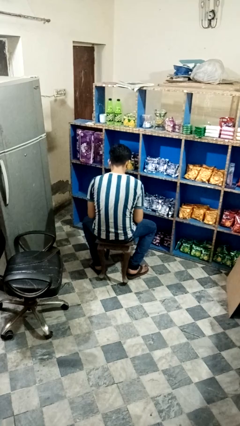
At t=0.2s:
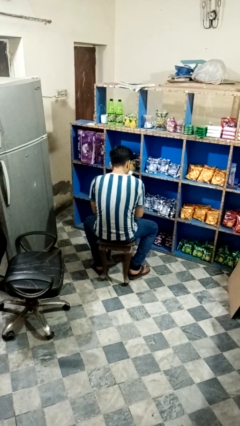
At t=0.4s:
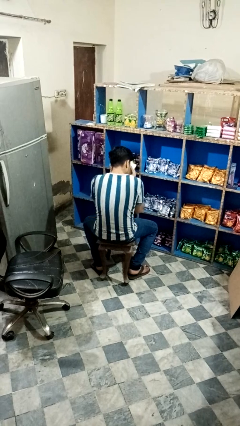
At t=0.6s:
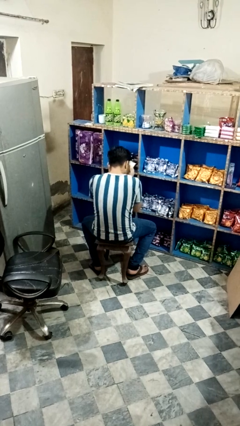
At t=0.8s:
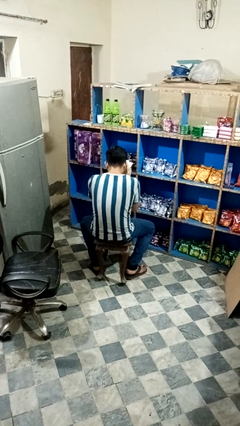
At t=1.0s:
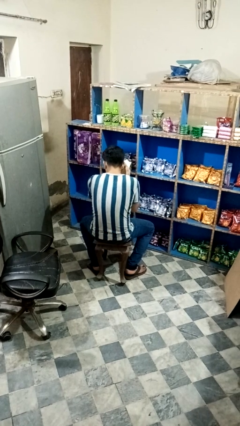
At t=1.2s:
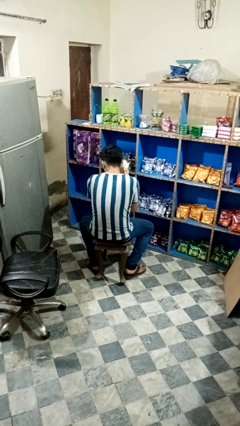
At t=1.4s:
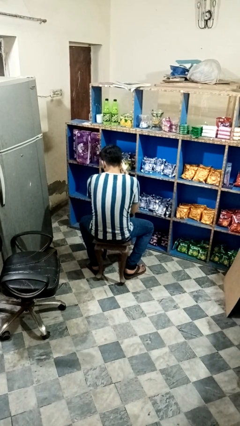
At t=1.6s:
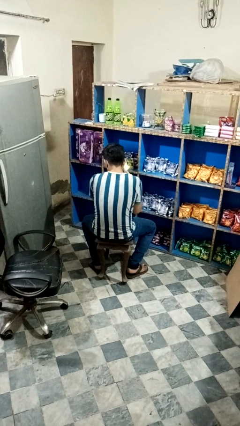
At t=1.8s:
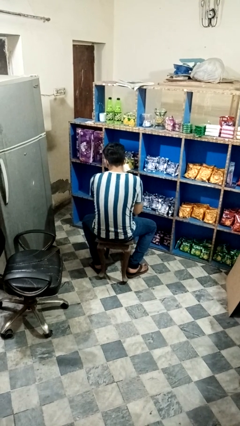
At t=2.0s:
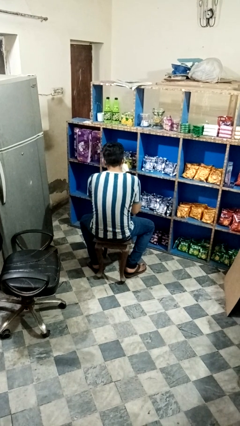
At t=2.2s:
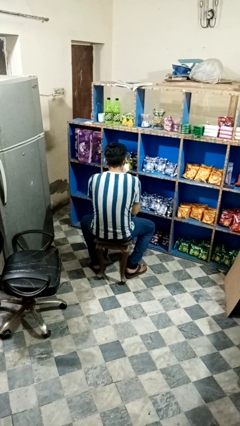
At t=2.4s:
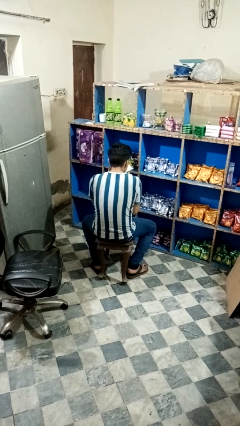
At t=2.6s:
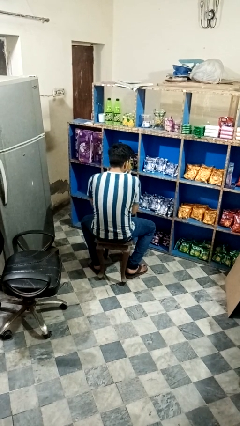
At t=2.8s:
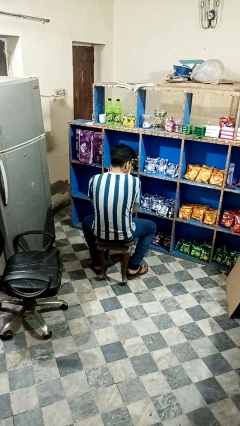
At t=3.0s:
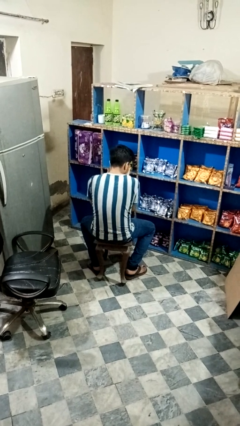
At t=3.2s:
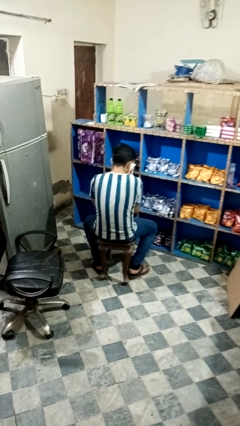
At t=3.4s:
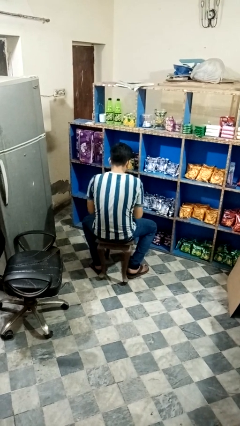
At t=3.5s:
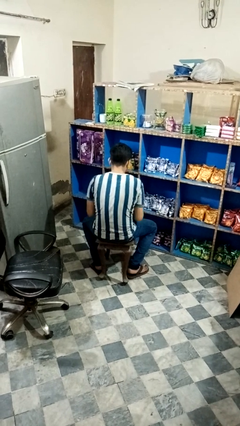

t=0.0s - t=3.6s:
person wipes mouth with napkin

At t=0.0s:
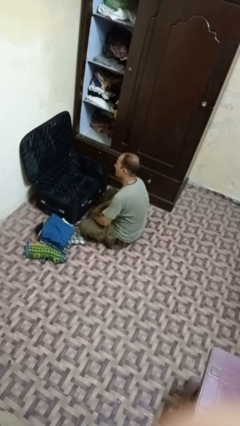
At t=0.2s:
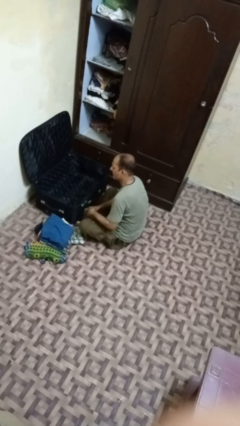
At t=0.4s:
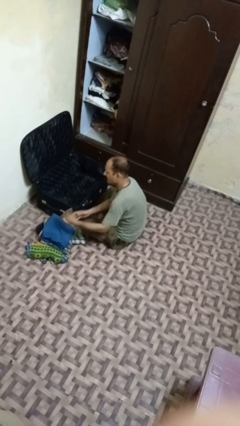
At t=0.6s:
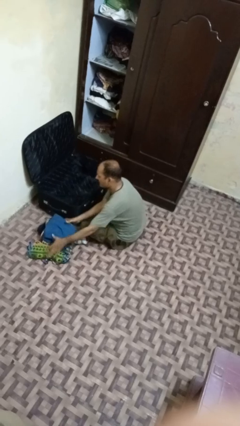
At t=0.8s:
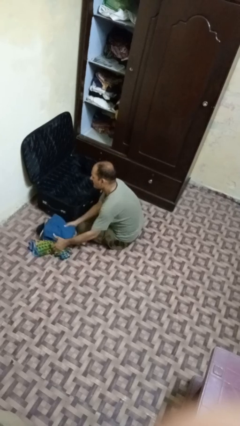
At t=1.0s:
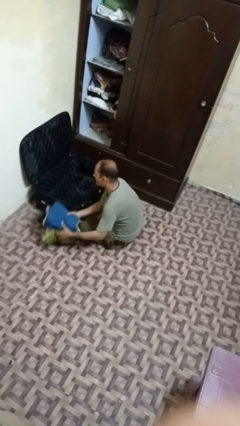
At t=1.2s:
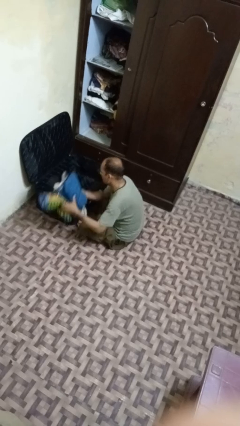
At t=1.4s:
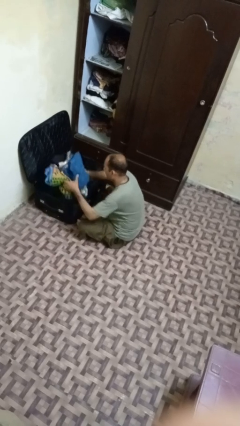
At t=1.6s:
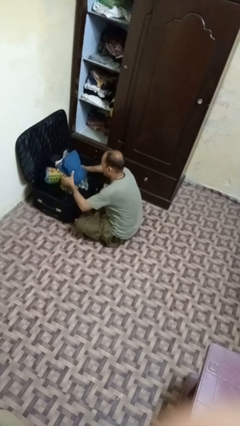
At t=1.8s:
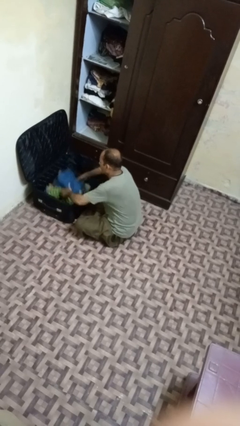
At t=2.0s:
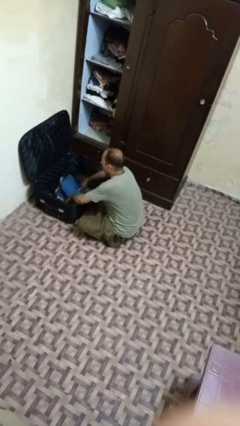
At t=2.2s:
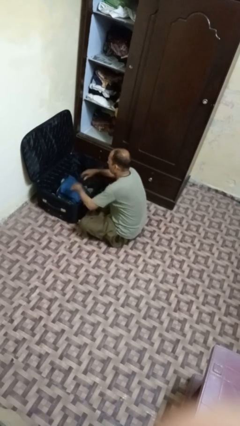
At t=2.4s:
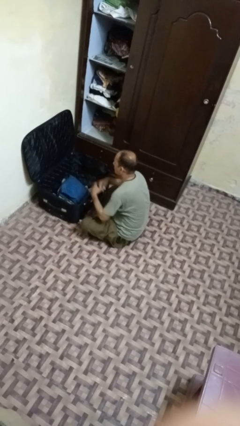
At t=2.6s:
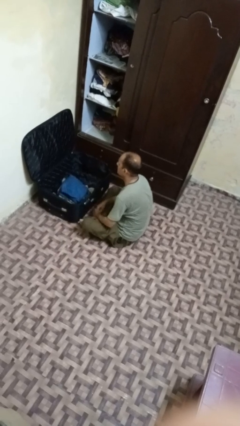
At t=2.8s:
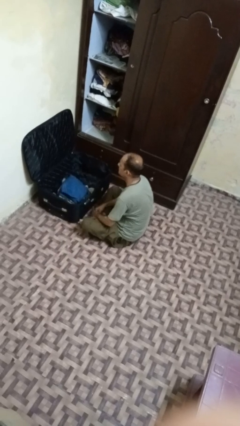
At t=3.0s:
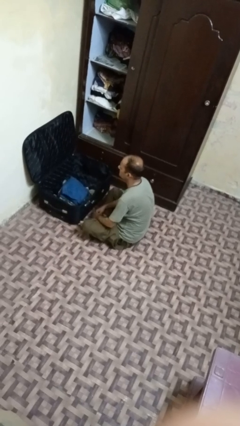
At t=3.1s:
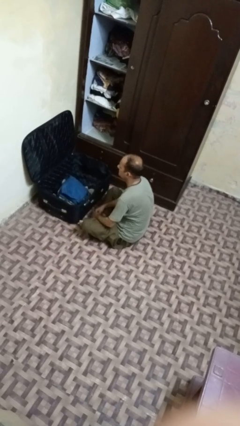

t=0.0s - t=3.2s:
person loads clothes into suitcase

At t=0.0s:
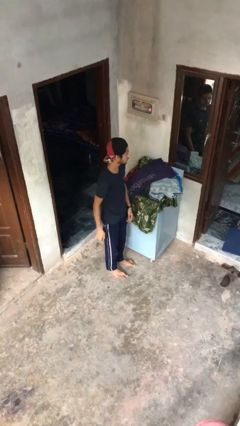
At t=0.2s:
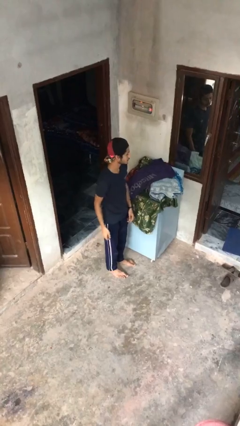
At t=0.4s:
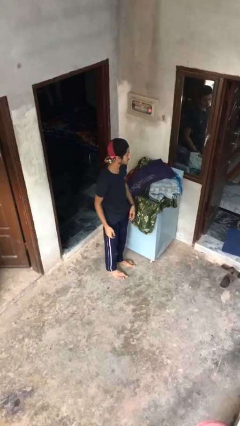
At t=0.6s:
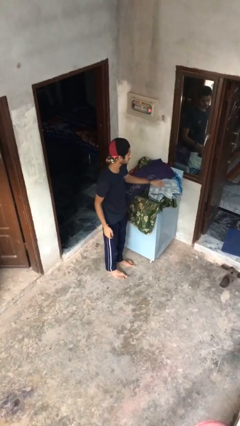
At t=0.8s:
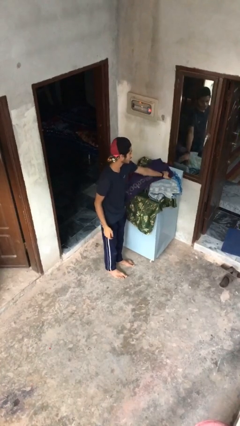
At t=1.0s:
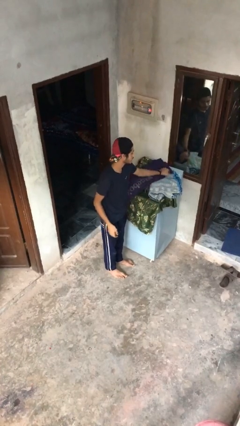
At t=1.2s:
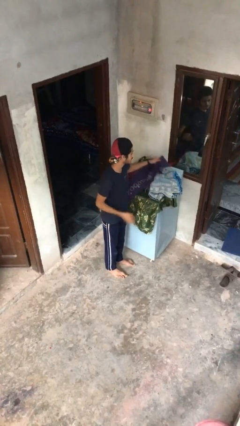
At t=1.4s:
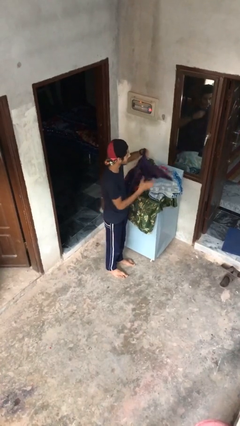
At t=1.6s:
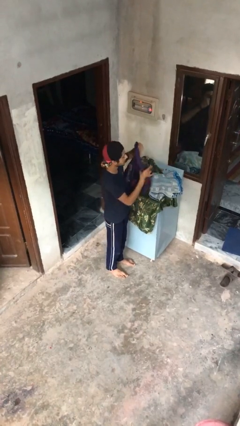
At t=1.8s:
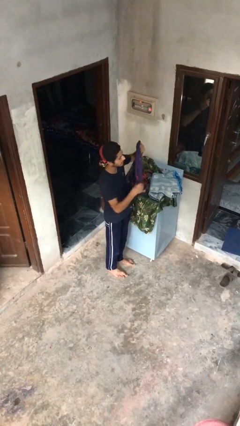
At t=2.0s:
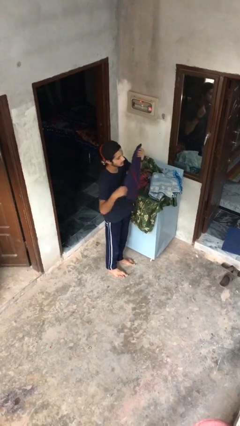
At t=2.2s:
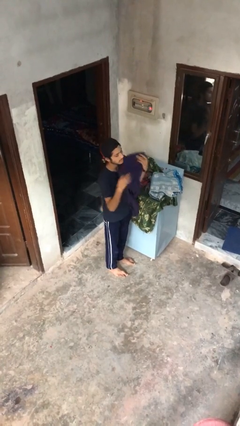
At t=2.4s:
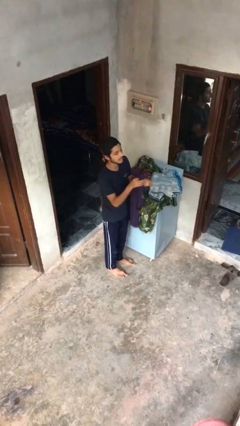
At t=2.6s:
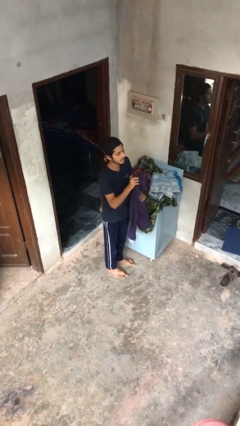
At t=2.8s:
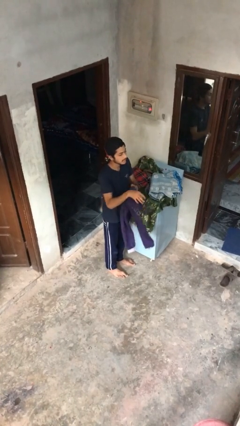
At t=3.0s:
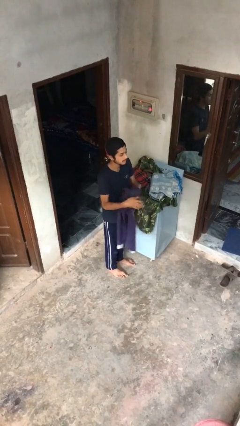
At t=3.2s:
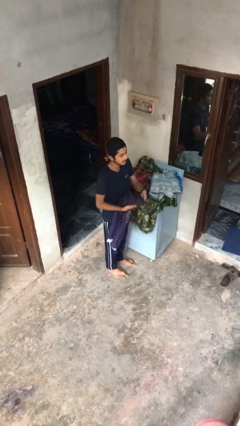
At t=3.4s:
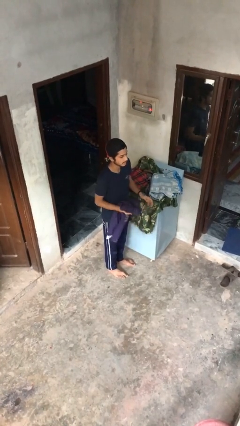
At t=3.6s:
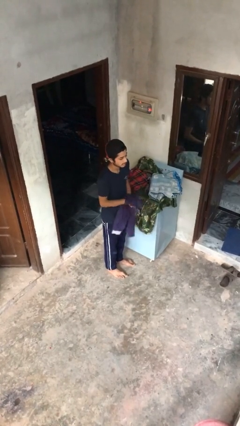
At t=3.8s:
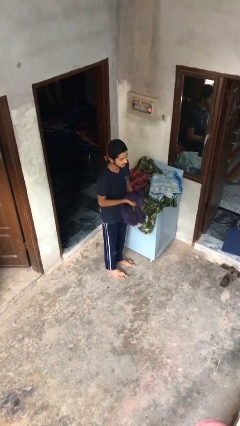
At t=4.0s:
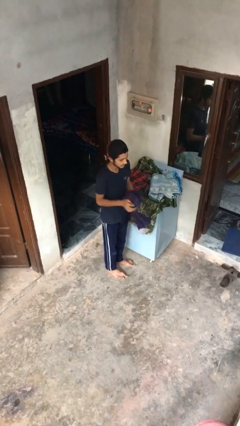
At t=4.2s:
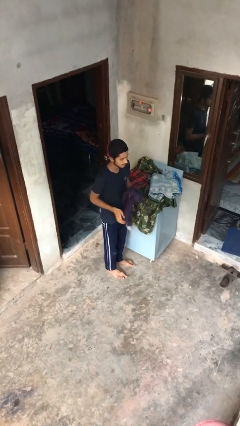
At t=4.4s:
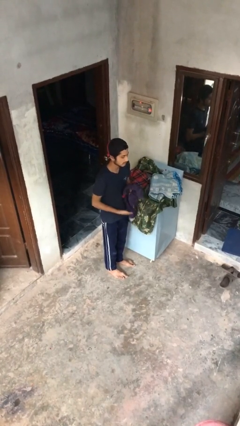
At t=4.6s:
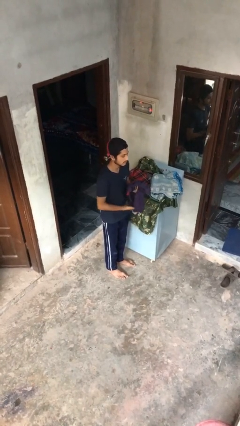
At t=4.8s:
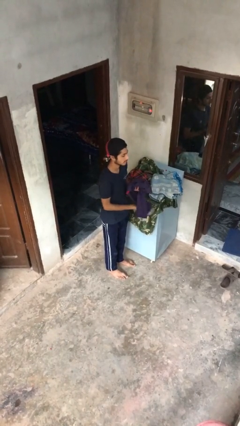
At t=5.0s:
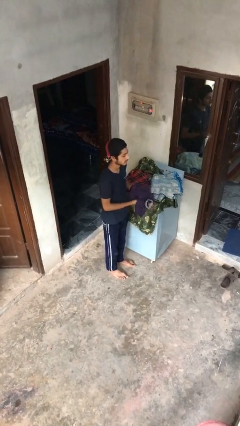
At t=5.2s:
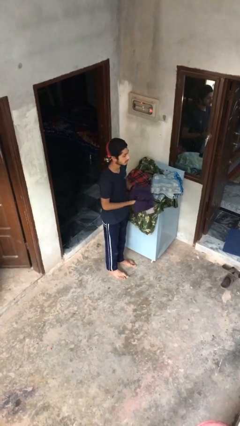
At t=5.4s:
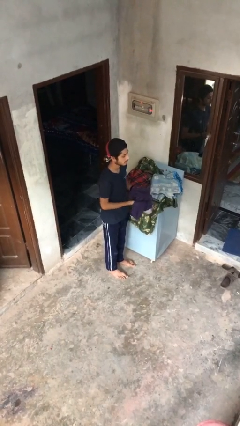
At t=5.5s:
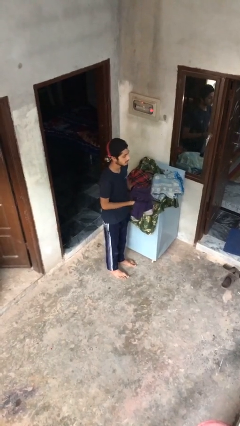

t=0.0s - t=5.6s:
person folds pants

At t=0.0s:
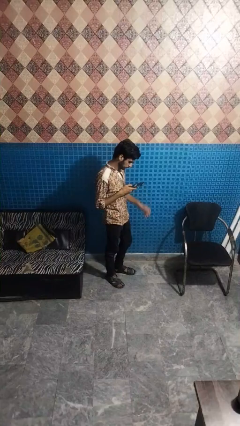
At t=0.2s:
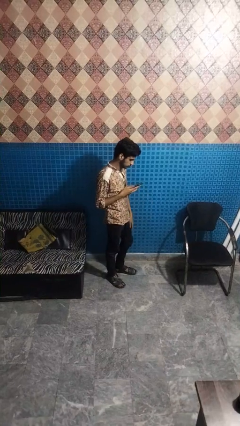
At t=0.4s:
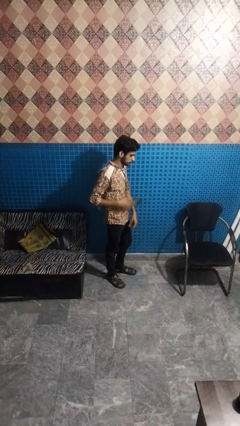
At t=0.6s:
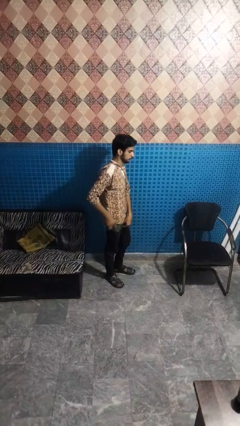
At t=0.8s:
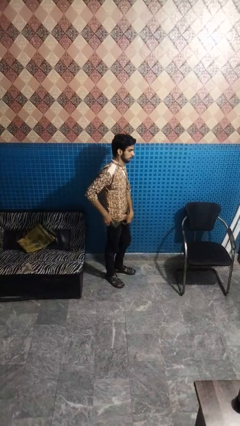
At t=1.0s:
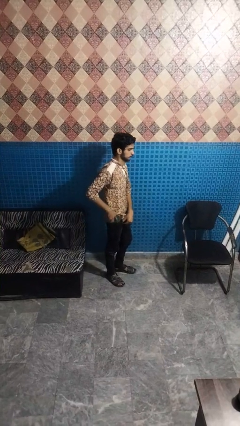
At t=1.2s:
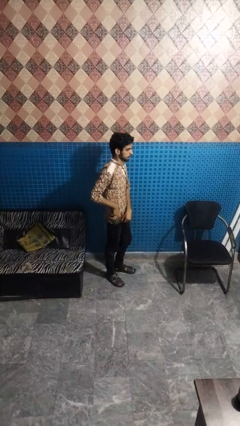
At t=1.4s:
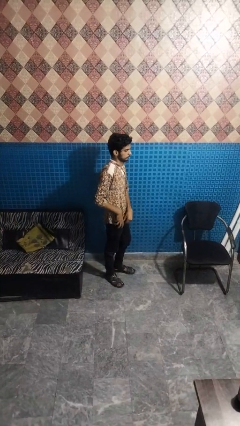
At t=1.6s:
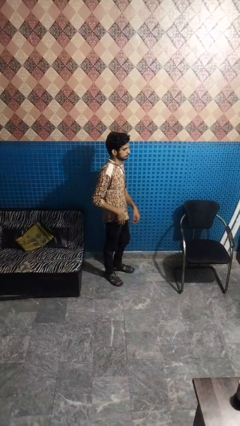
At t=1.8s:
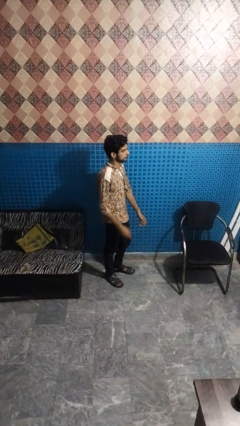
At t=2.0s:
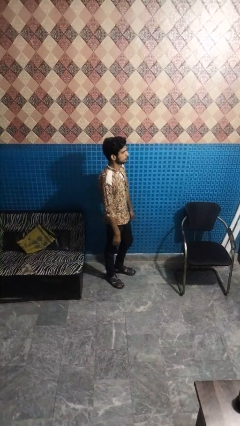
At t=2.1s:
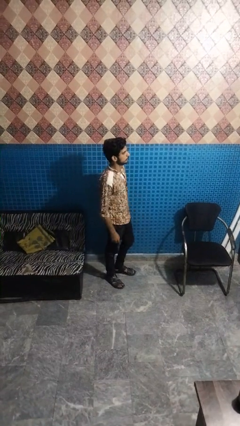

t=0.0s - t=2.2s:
person puts phone into pocket

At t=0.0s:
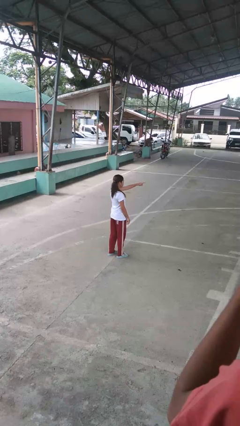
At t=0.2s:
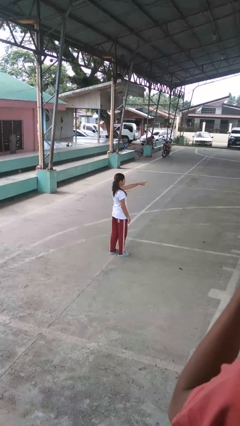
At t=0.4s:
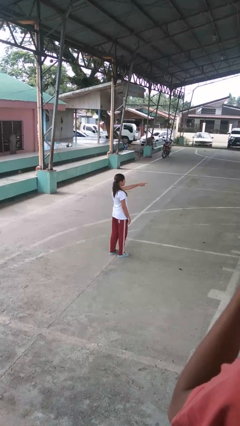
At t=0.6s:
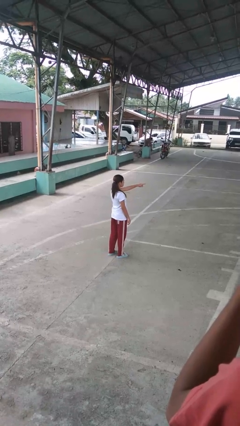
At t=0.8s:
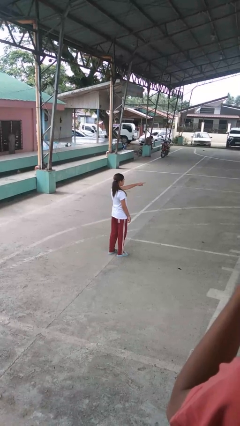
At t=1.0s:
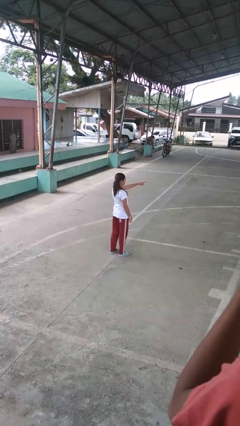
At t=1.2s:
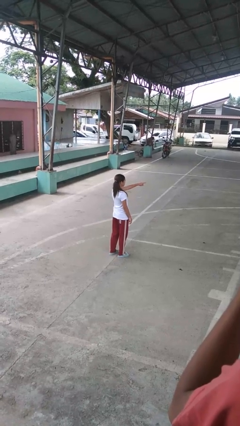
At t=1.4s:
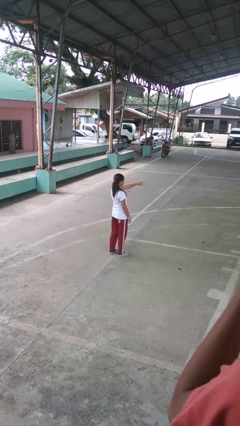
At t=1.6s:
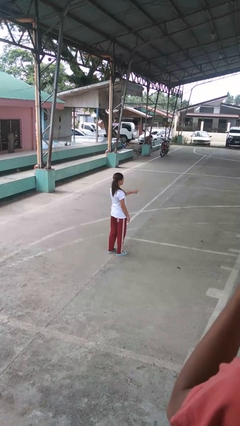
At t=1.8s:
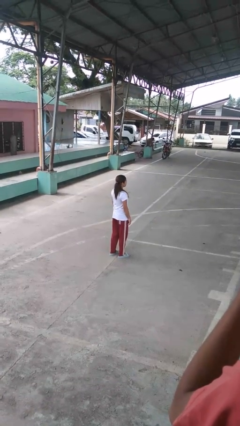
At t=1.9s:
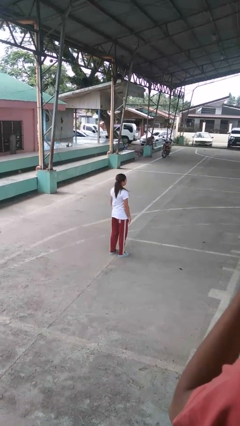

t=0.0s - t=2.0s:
person points at person

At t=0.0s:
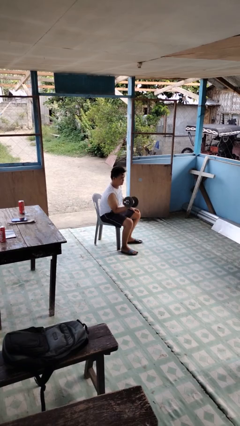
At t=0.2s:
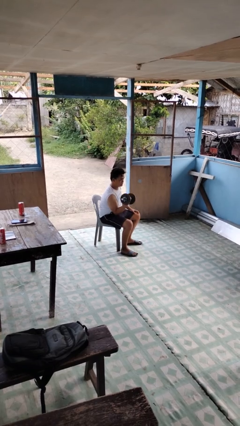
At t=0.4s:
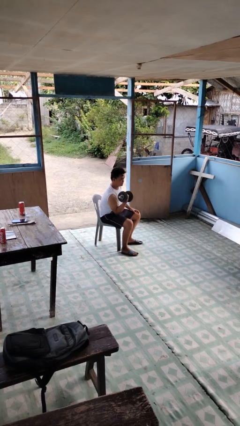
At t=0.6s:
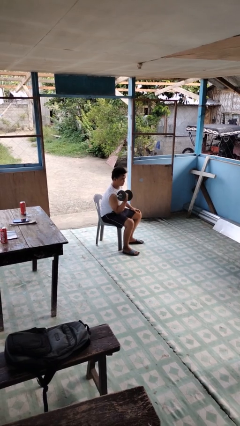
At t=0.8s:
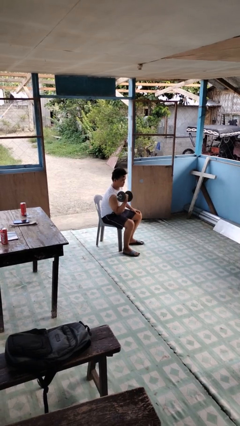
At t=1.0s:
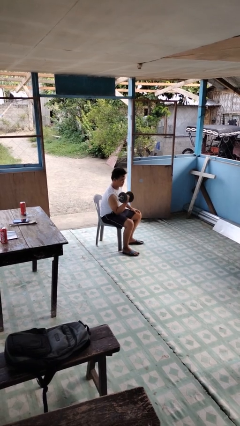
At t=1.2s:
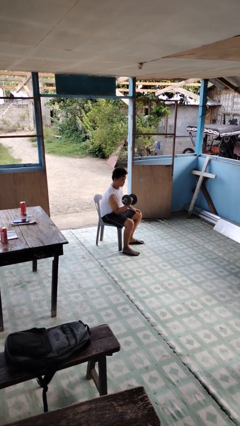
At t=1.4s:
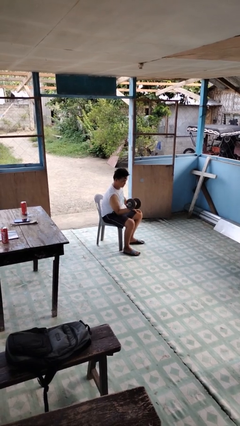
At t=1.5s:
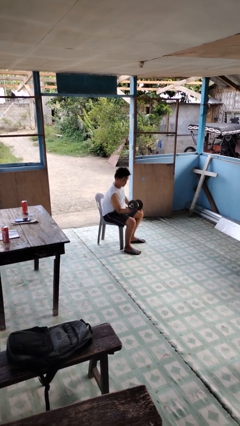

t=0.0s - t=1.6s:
person lifts dumbbells
